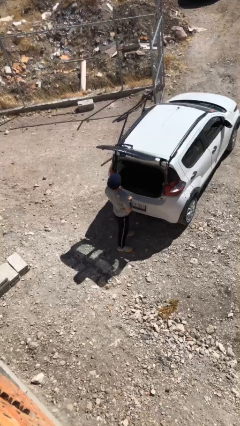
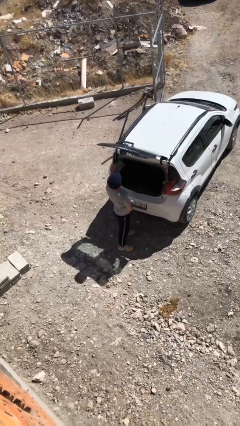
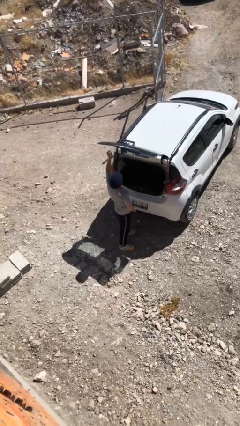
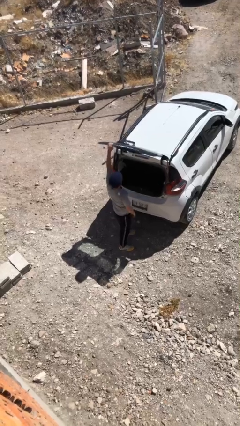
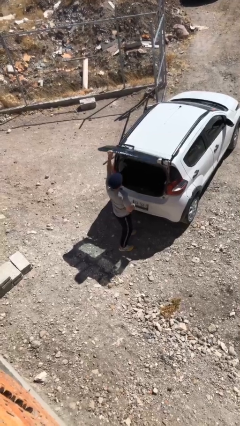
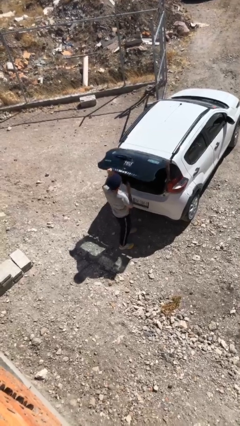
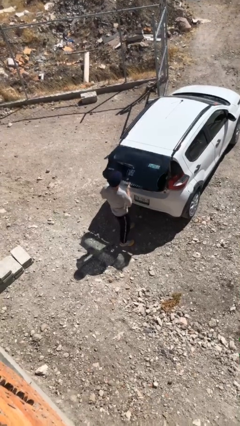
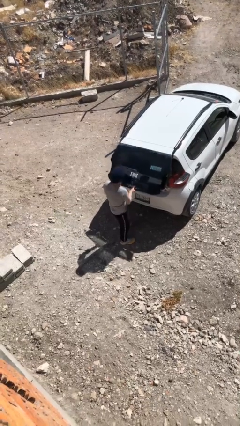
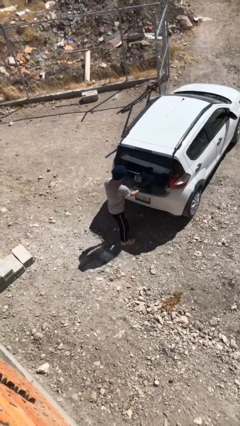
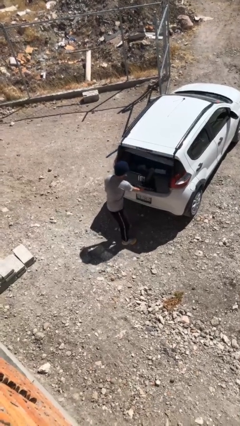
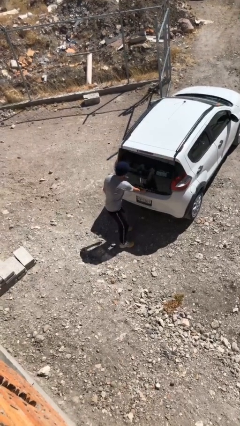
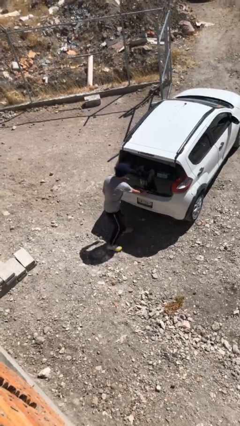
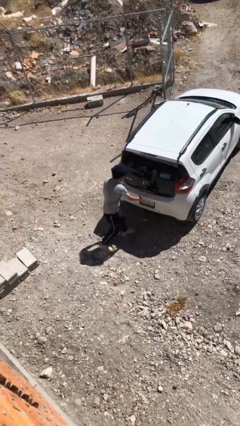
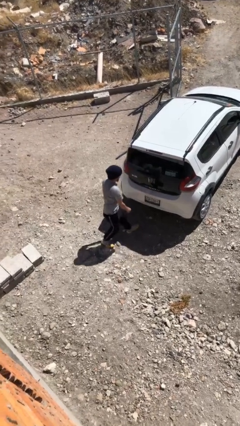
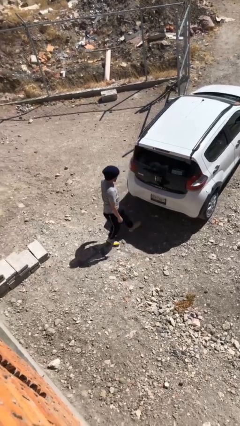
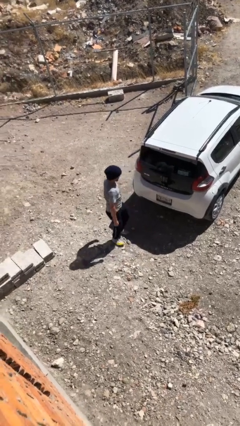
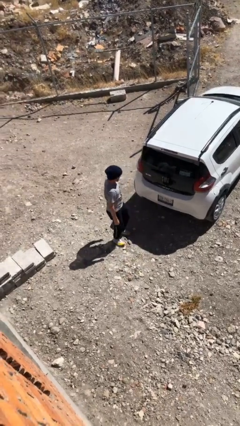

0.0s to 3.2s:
person closes car trunk

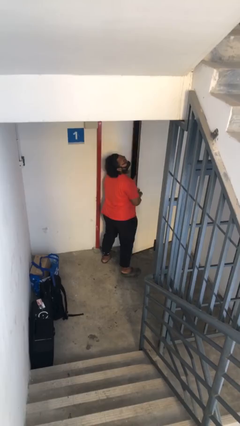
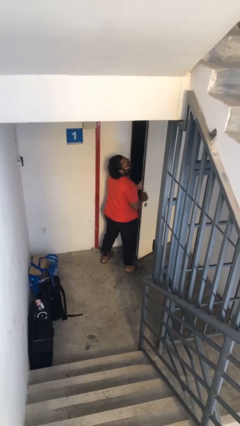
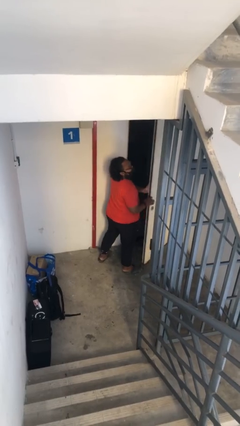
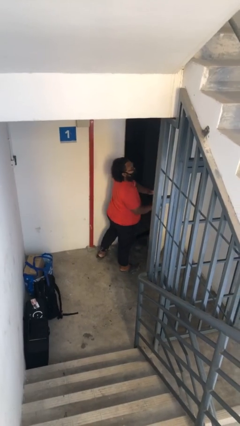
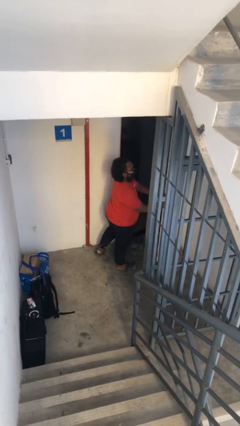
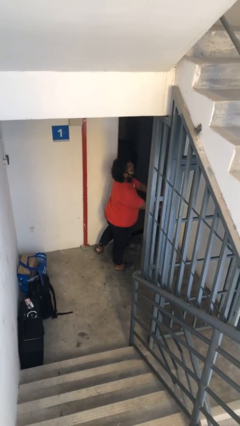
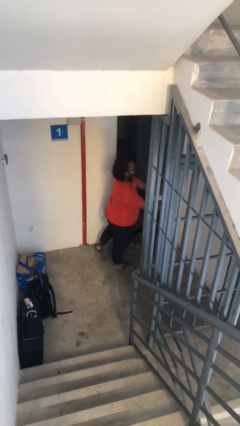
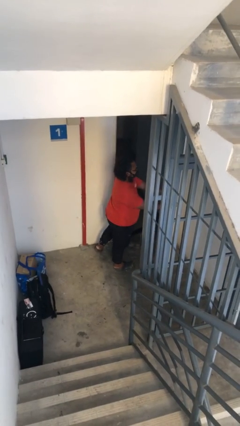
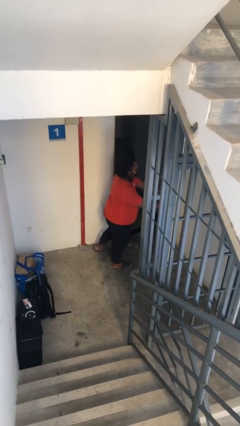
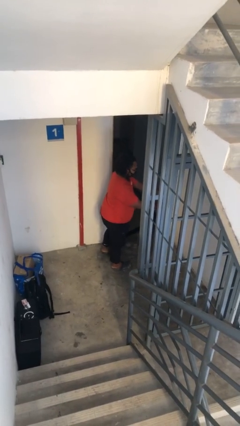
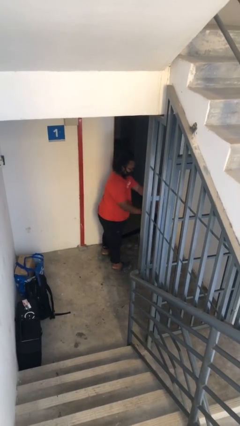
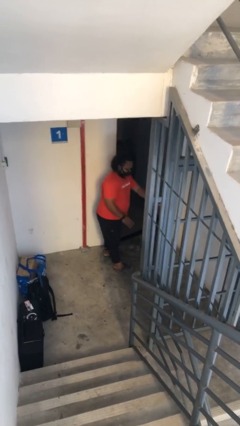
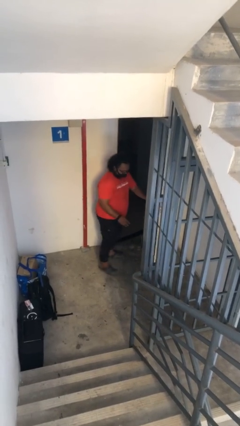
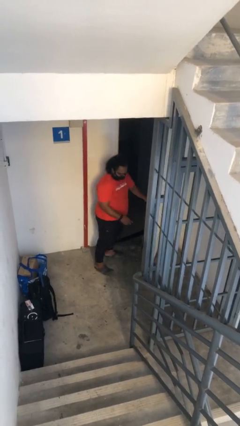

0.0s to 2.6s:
person opens facility door

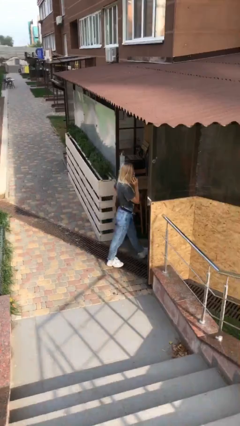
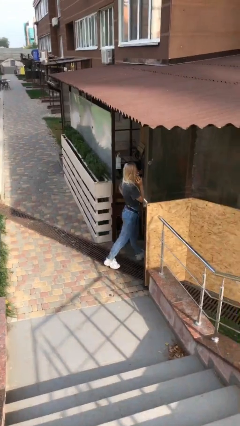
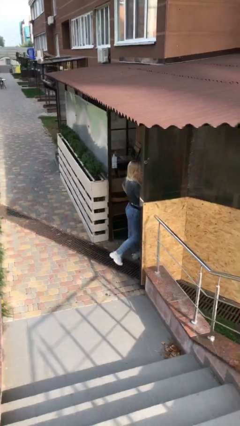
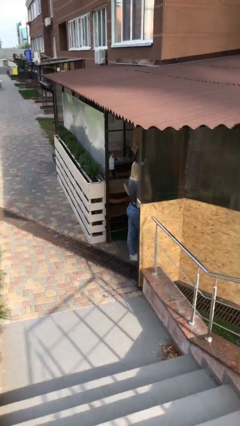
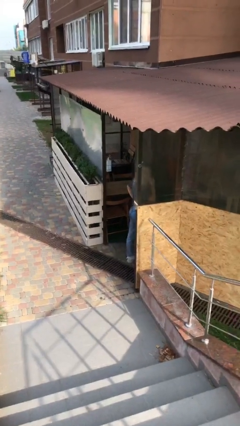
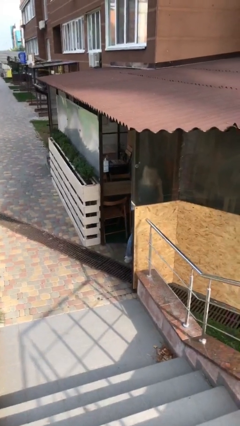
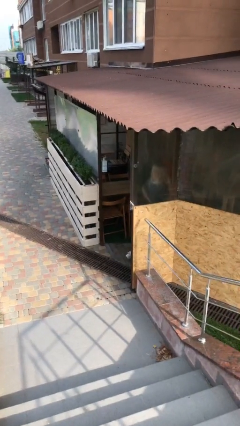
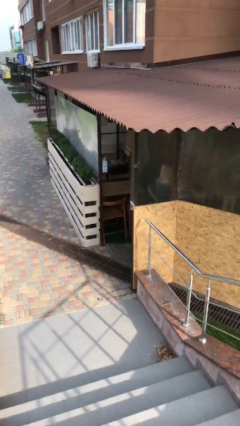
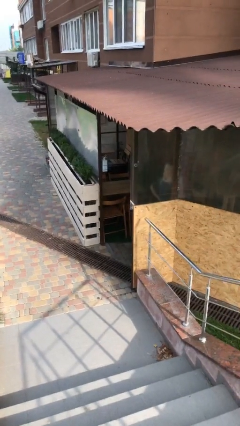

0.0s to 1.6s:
person enters scene through structure

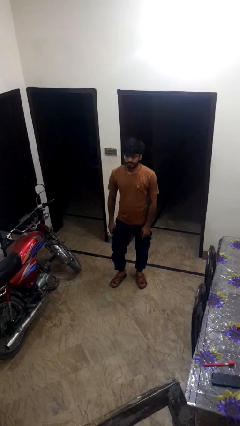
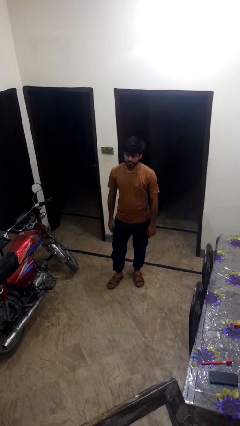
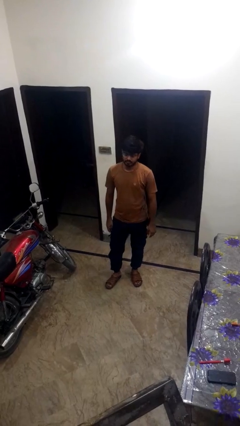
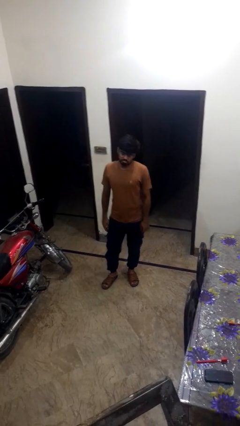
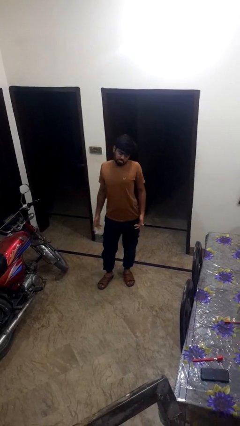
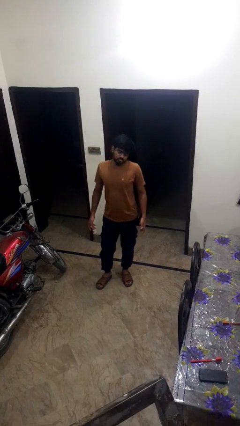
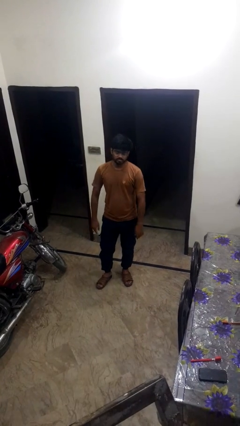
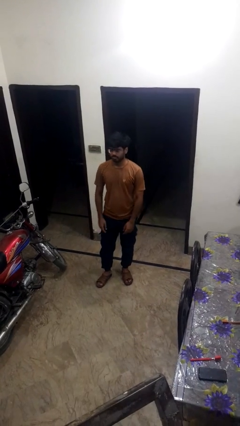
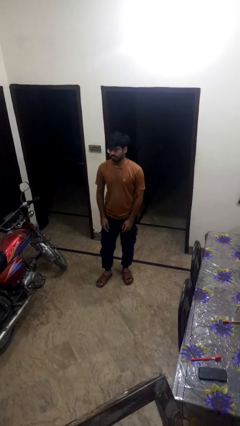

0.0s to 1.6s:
person shrugs

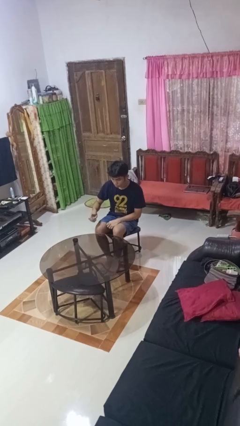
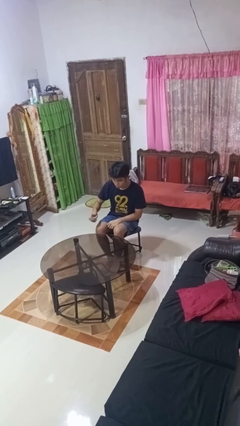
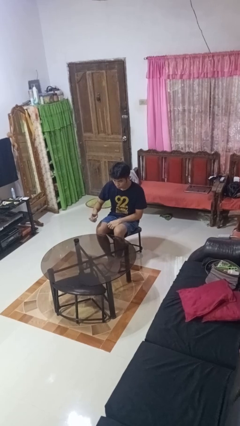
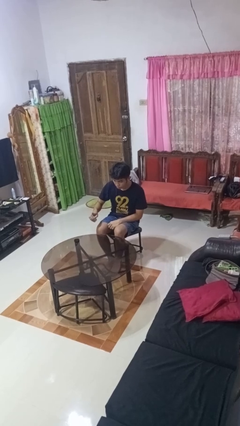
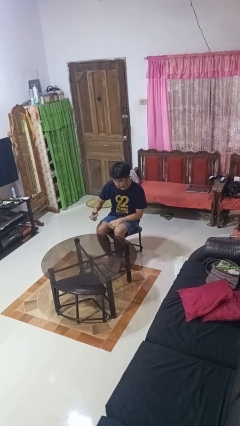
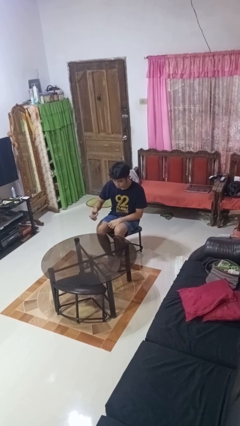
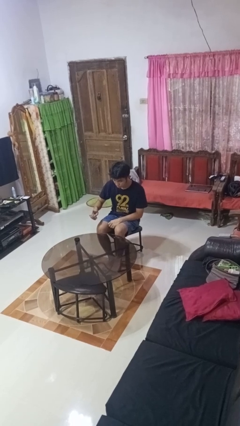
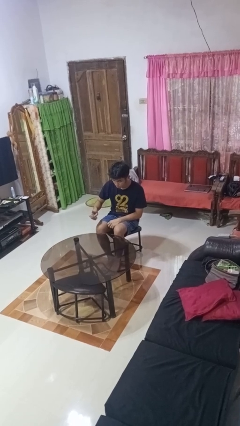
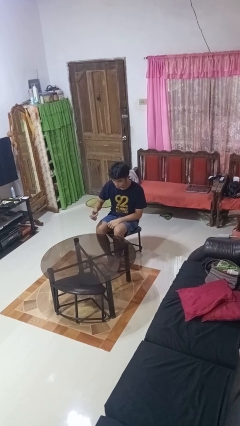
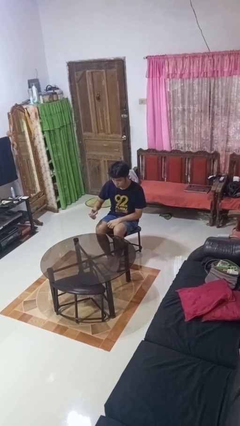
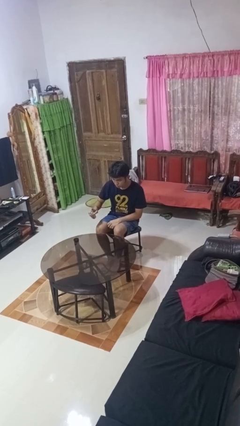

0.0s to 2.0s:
person sprays from bottle

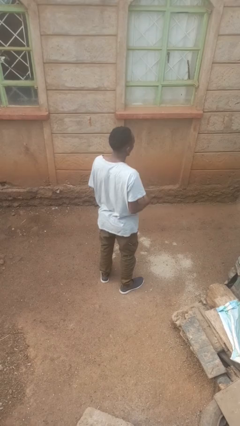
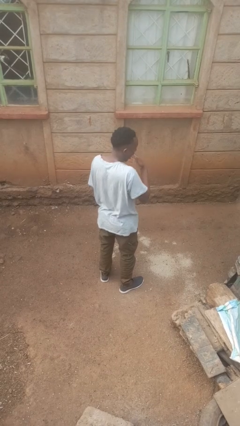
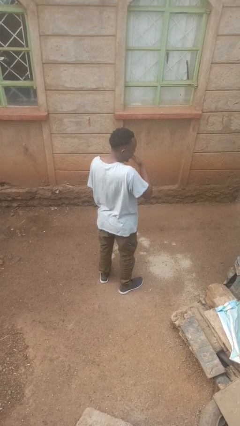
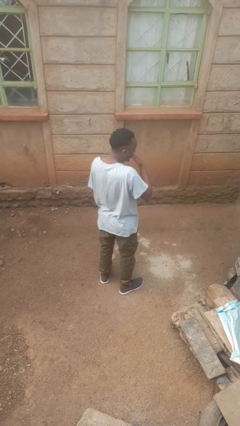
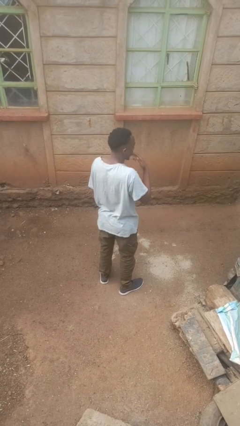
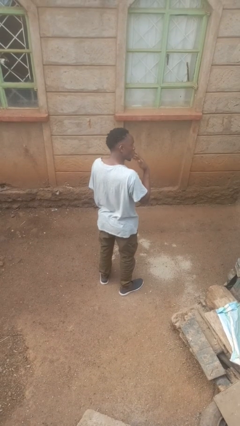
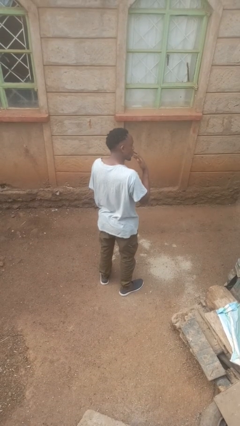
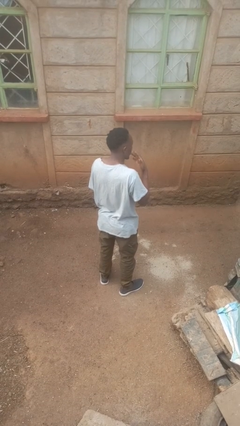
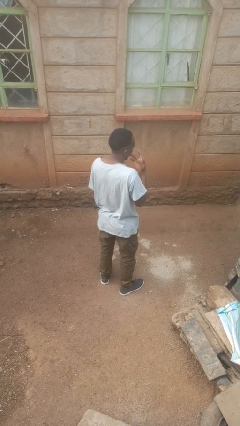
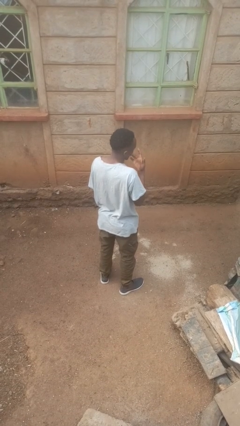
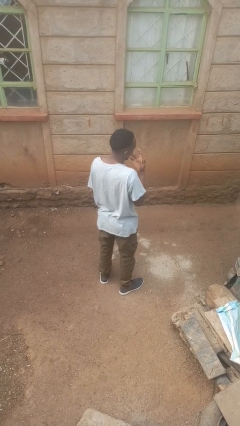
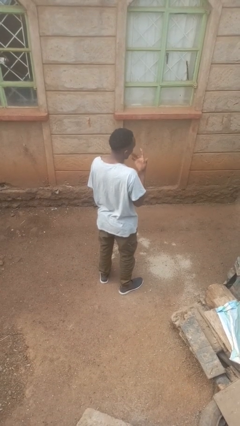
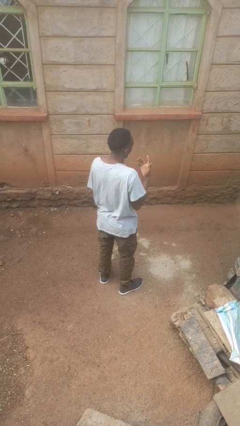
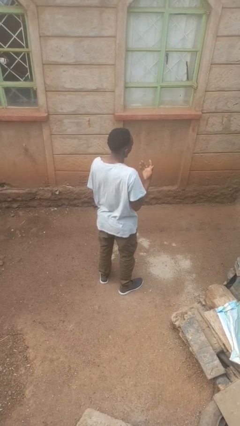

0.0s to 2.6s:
person licks fingers

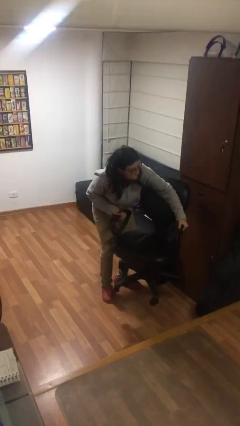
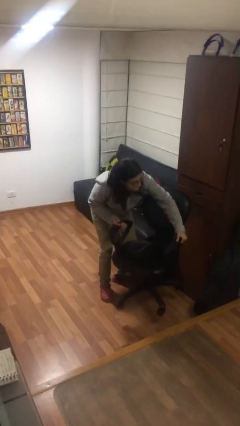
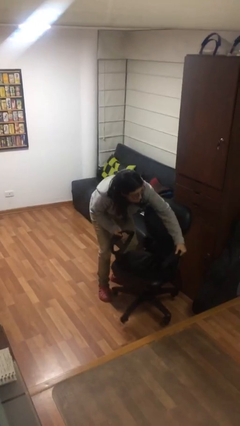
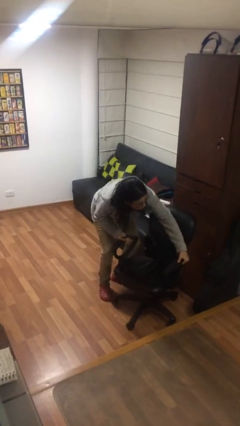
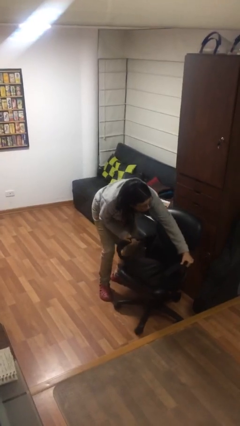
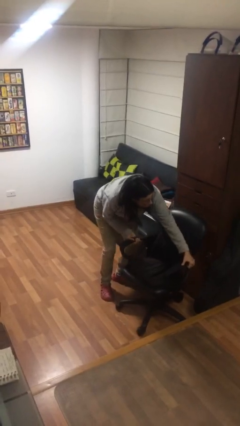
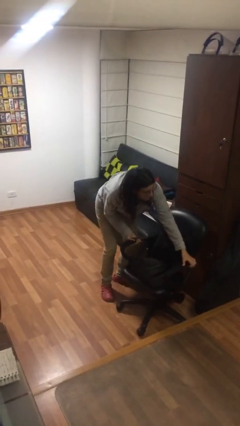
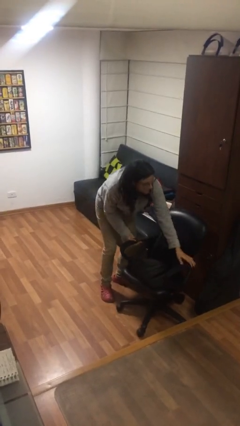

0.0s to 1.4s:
person puts down object on floor

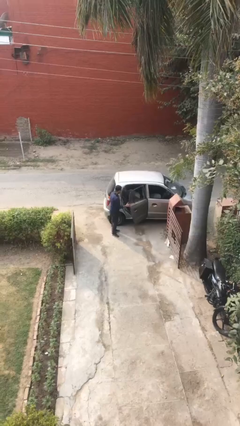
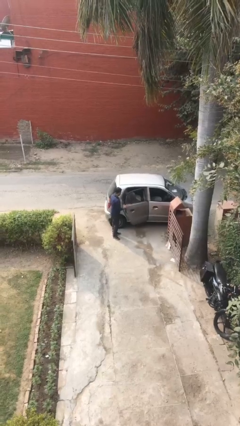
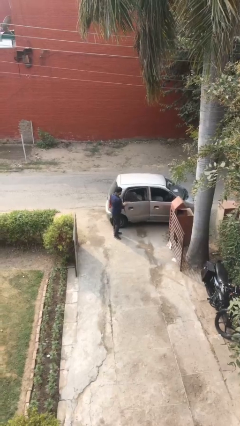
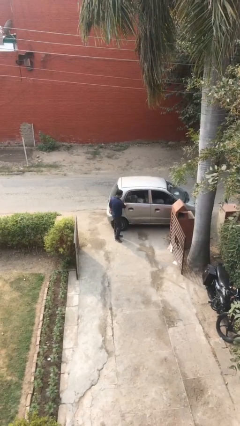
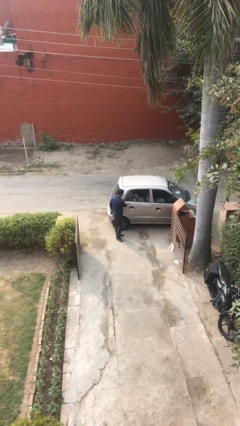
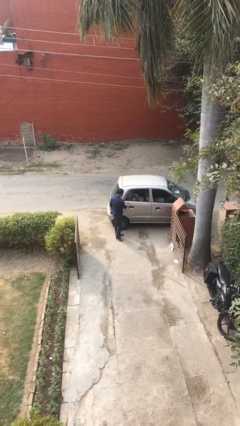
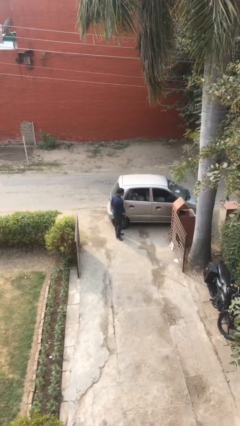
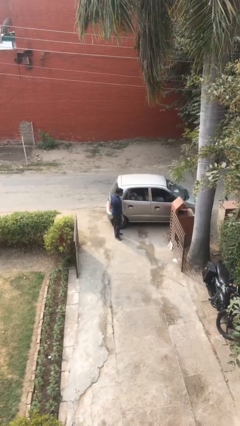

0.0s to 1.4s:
person closes car door

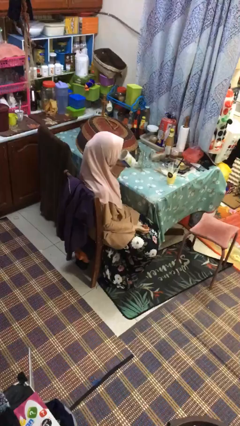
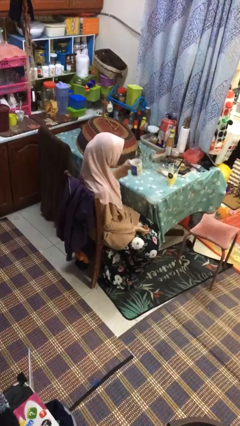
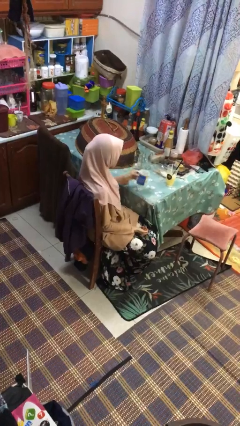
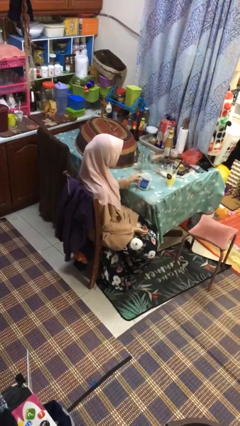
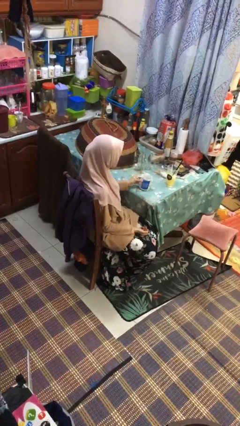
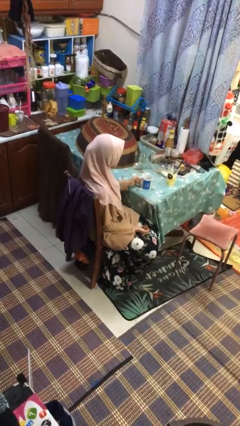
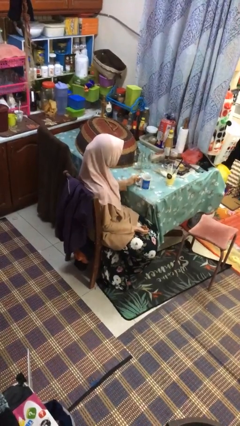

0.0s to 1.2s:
person puts down object on table
